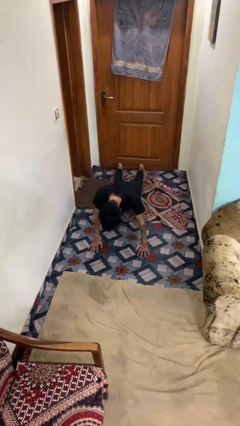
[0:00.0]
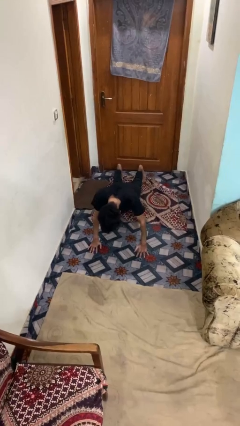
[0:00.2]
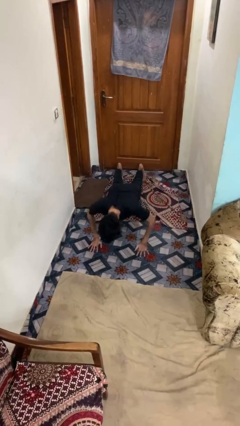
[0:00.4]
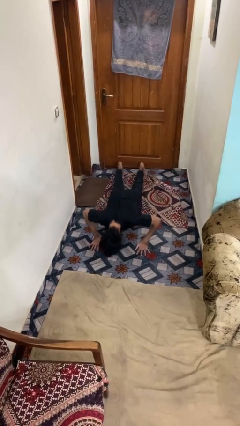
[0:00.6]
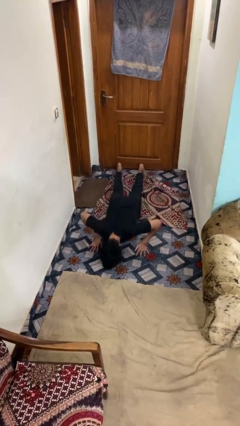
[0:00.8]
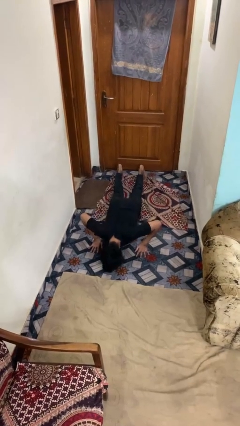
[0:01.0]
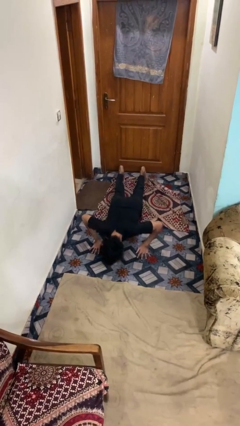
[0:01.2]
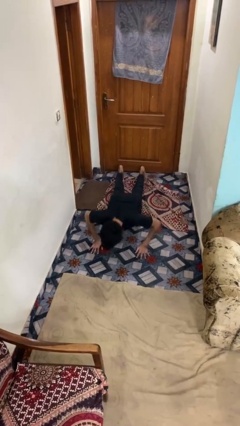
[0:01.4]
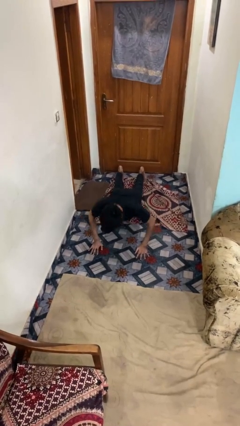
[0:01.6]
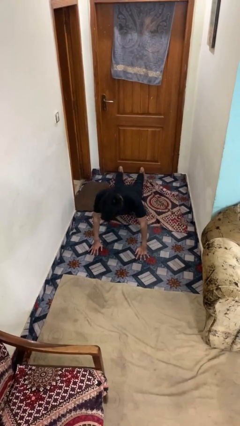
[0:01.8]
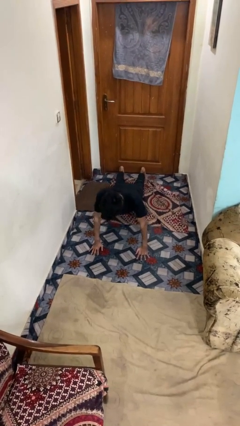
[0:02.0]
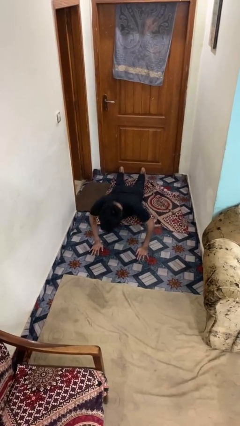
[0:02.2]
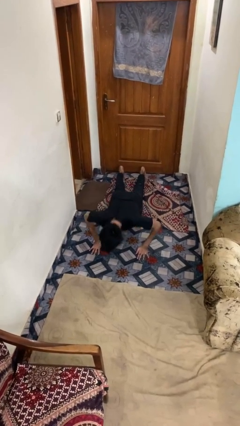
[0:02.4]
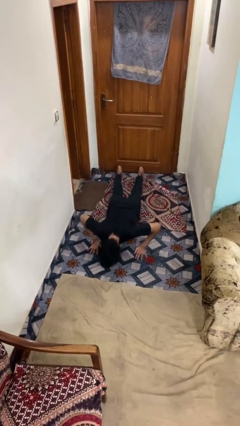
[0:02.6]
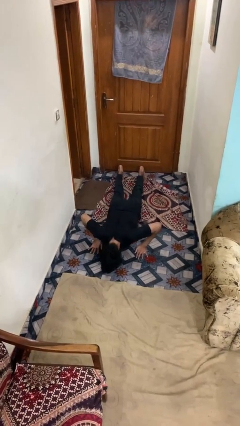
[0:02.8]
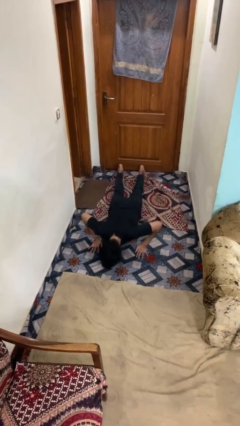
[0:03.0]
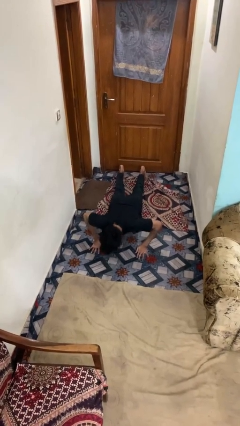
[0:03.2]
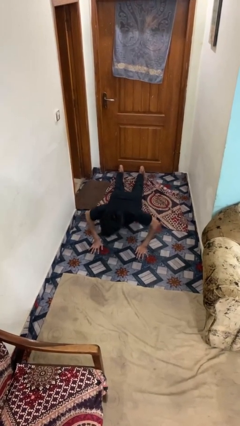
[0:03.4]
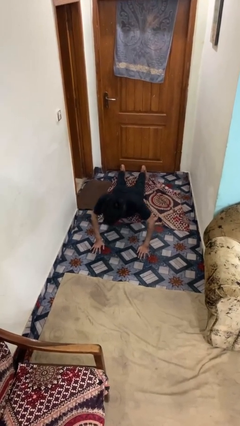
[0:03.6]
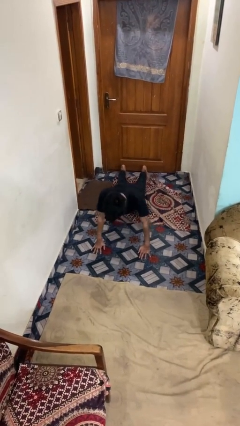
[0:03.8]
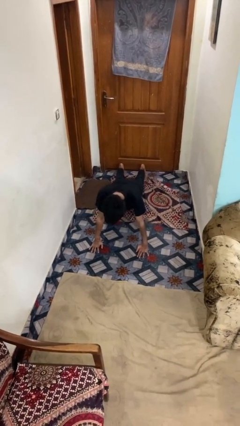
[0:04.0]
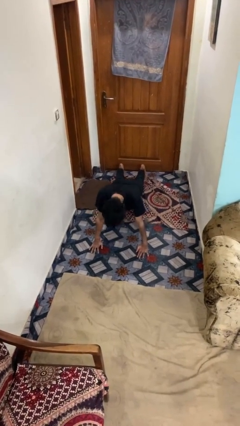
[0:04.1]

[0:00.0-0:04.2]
person exercises with pushup

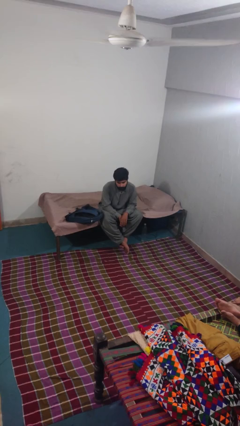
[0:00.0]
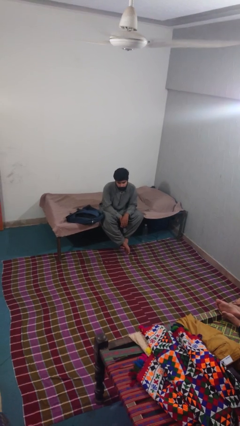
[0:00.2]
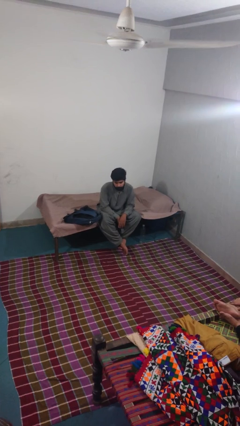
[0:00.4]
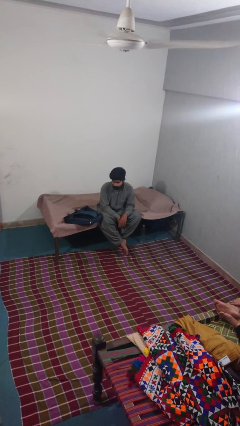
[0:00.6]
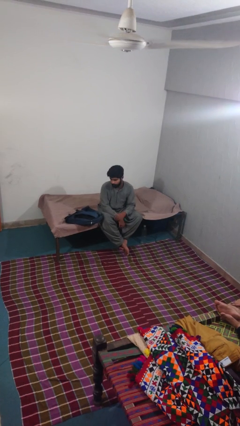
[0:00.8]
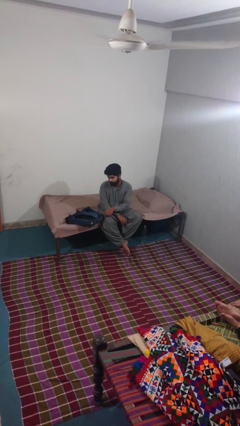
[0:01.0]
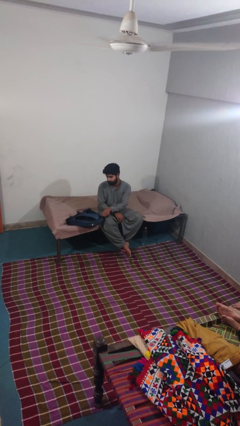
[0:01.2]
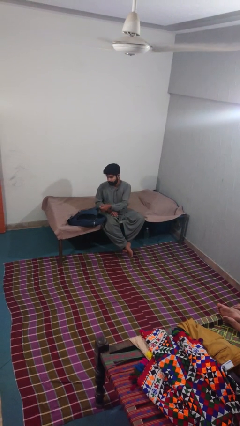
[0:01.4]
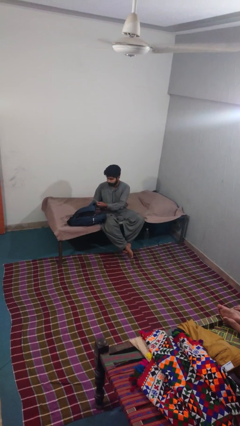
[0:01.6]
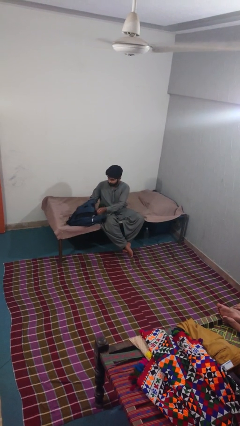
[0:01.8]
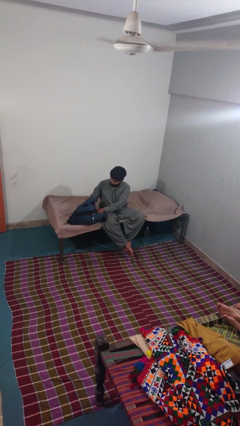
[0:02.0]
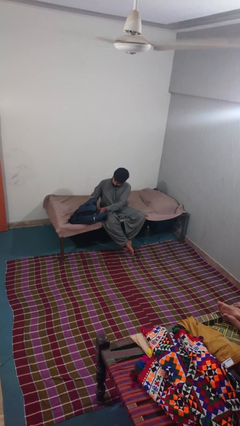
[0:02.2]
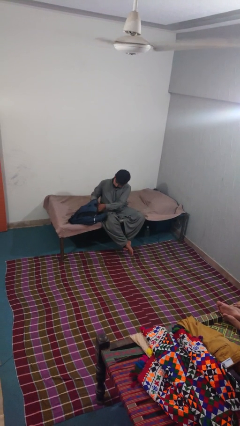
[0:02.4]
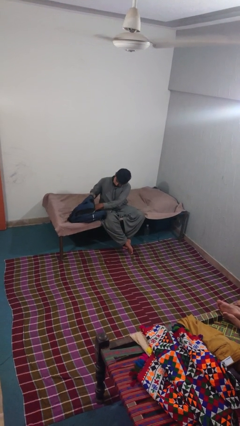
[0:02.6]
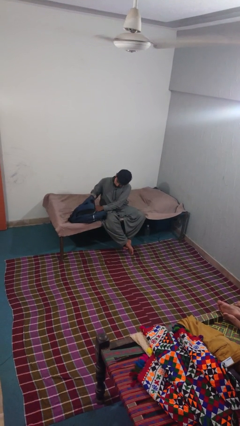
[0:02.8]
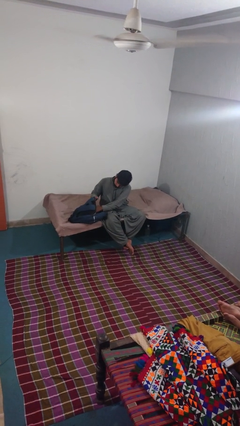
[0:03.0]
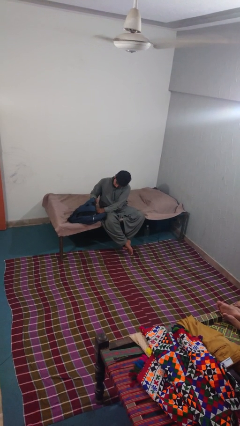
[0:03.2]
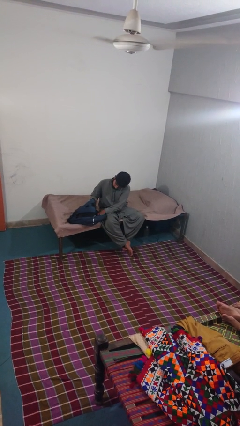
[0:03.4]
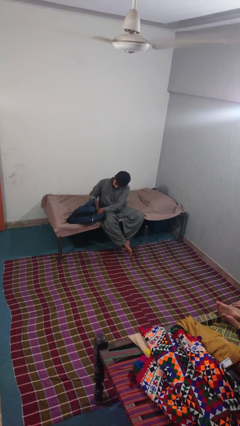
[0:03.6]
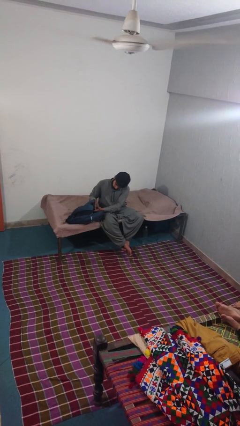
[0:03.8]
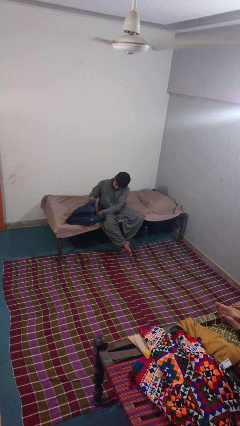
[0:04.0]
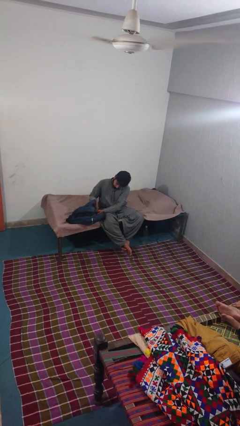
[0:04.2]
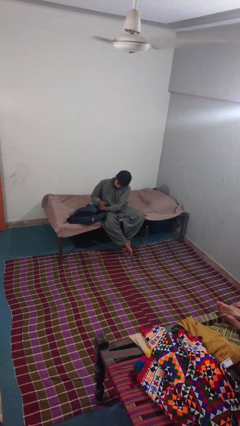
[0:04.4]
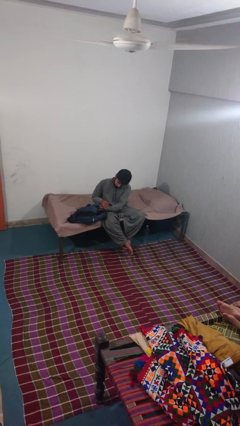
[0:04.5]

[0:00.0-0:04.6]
person searches in bag

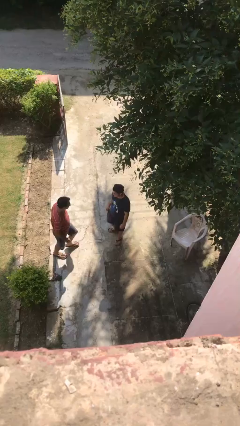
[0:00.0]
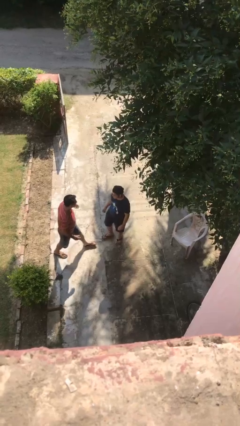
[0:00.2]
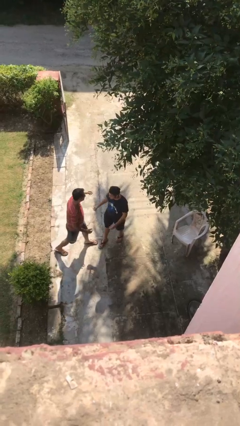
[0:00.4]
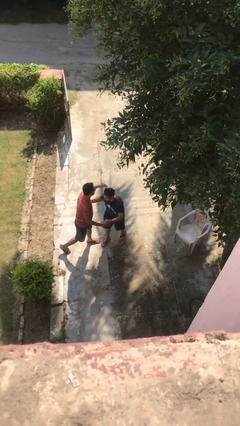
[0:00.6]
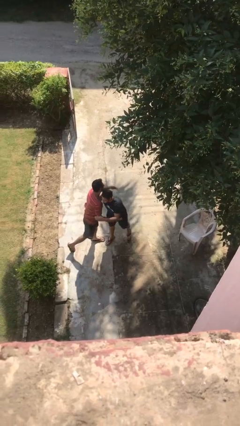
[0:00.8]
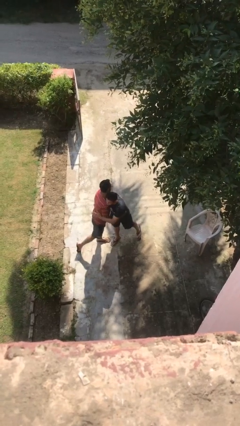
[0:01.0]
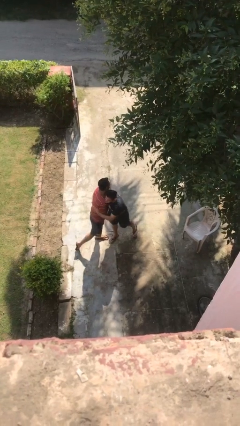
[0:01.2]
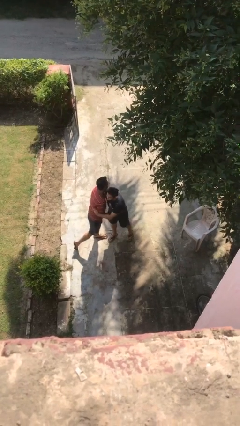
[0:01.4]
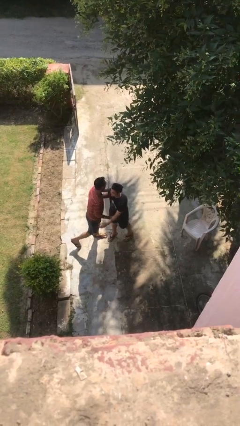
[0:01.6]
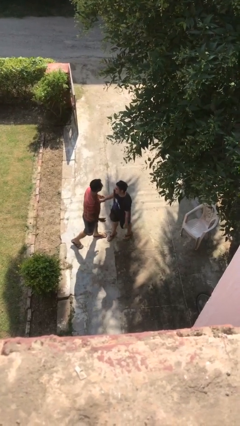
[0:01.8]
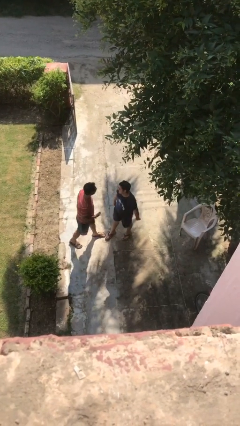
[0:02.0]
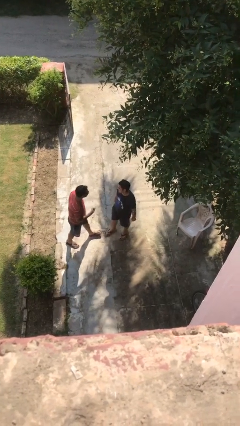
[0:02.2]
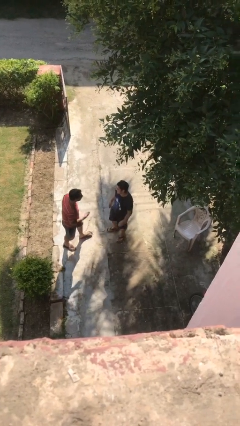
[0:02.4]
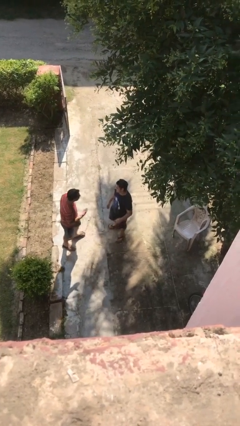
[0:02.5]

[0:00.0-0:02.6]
person embraces person

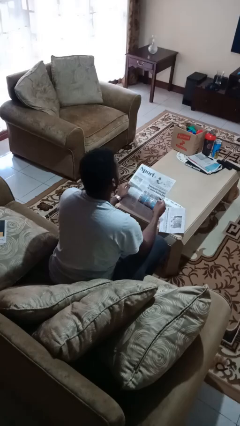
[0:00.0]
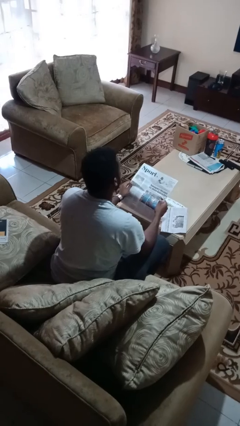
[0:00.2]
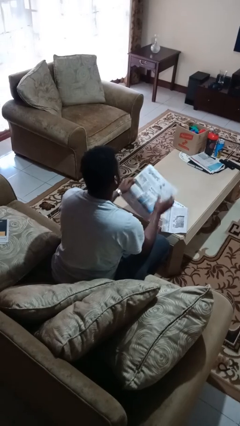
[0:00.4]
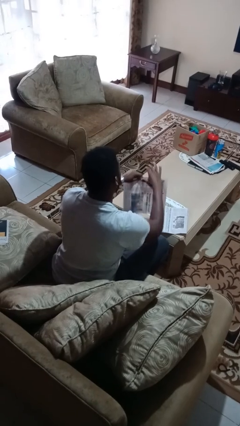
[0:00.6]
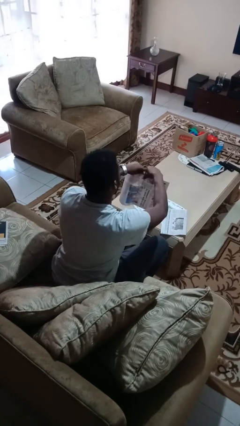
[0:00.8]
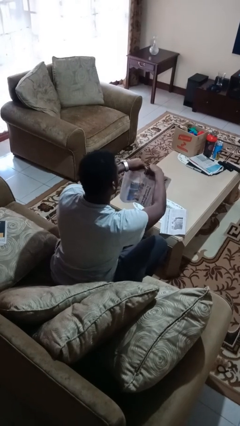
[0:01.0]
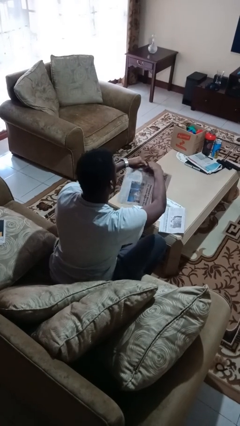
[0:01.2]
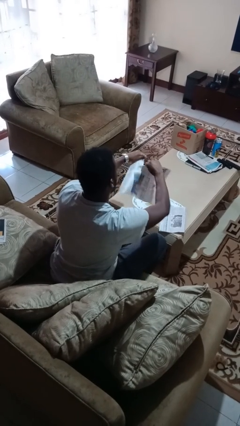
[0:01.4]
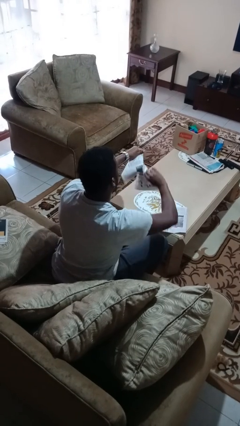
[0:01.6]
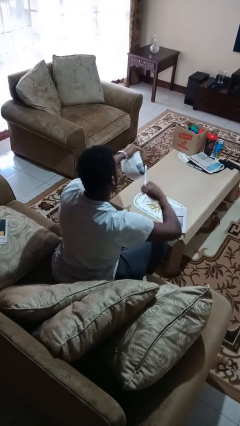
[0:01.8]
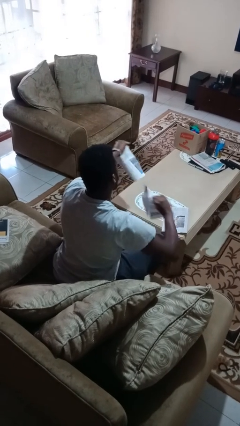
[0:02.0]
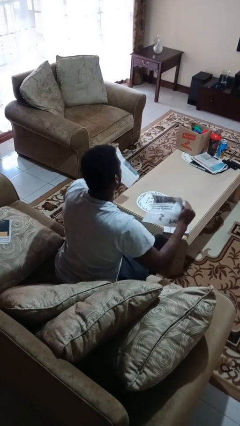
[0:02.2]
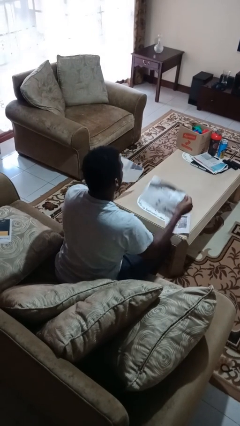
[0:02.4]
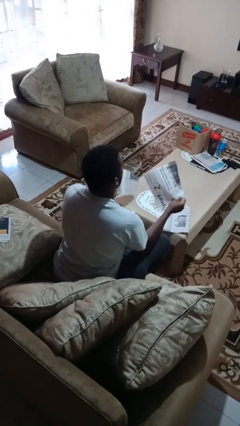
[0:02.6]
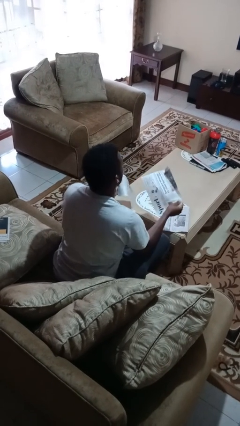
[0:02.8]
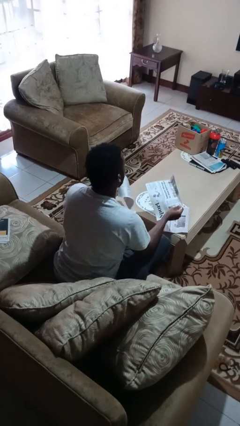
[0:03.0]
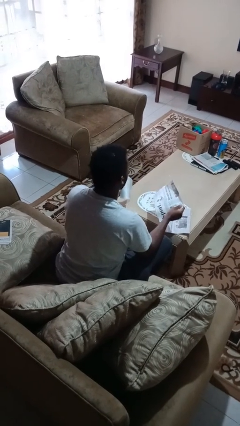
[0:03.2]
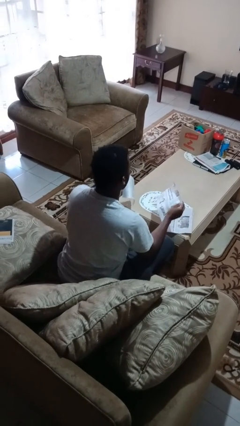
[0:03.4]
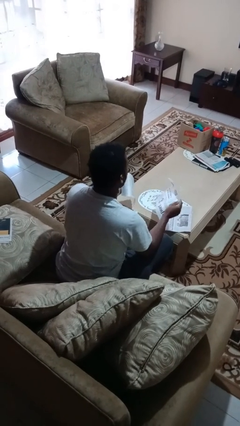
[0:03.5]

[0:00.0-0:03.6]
person tears paper

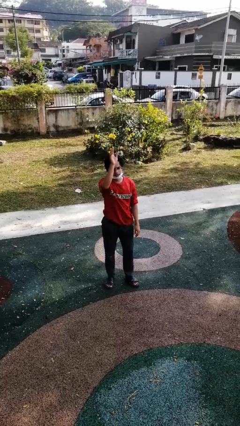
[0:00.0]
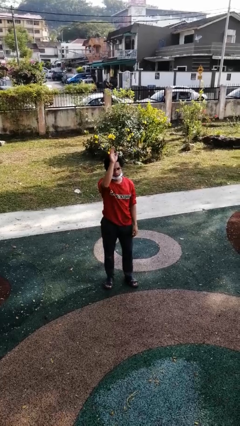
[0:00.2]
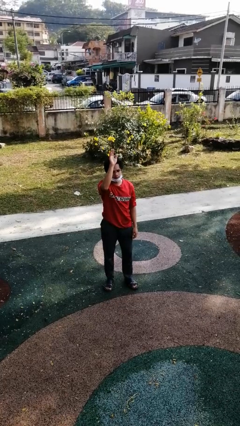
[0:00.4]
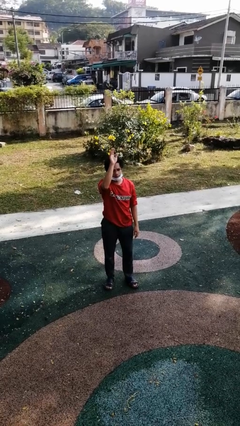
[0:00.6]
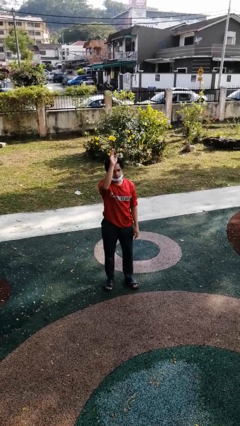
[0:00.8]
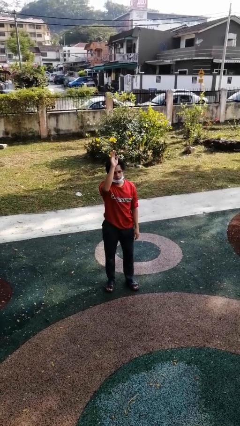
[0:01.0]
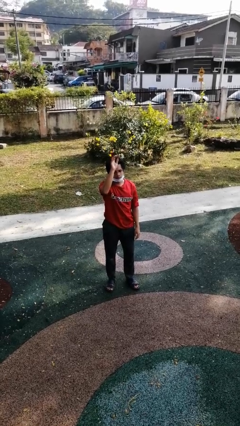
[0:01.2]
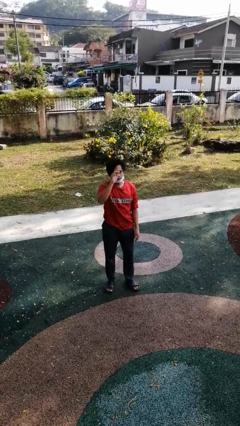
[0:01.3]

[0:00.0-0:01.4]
person gestures raise hand

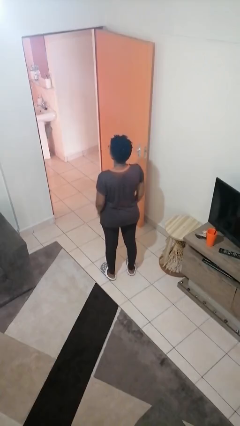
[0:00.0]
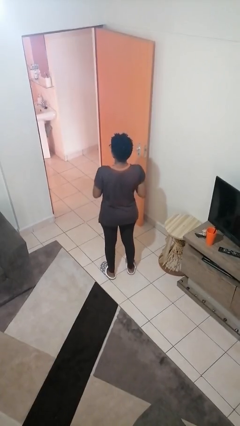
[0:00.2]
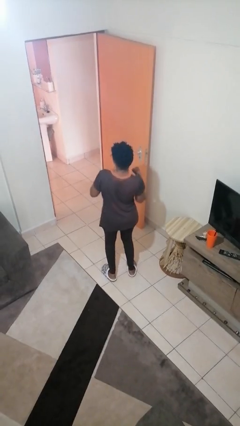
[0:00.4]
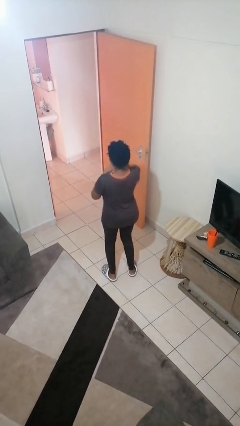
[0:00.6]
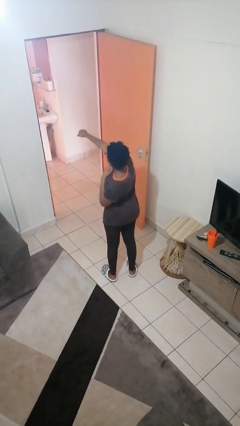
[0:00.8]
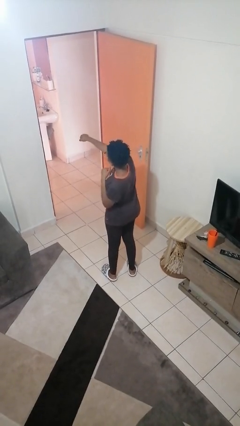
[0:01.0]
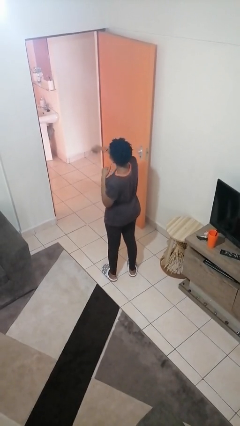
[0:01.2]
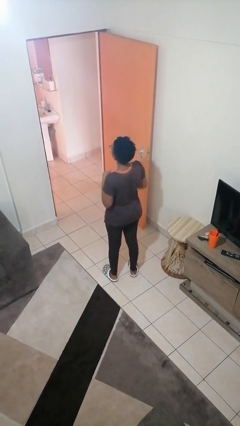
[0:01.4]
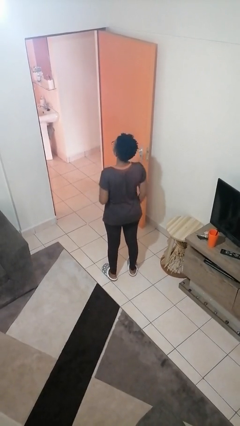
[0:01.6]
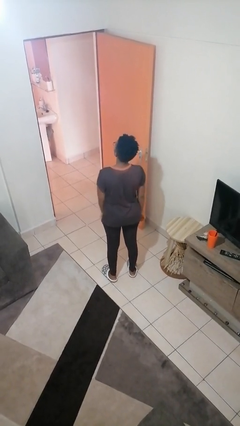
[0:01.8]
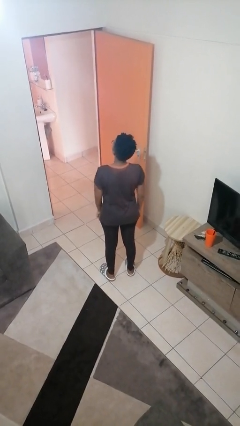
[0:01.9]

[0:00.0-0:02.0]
person punches
